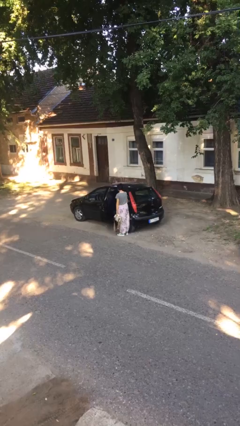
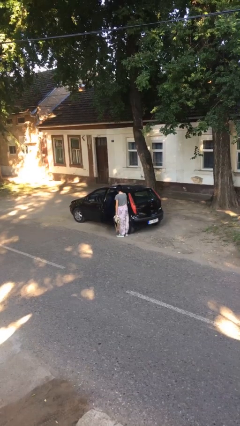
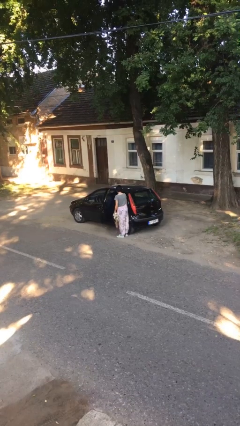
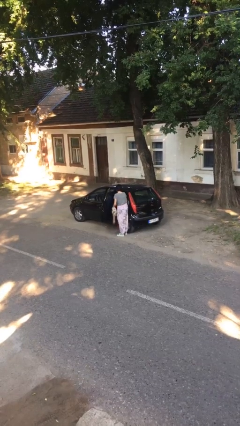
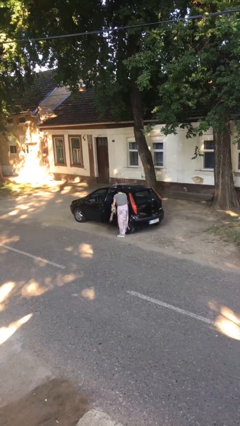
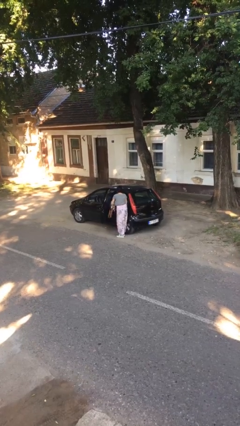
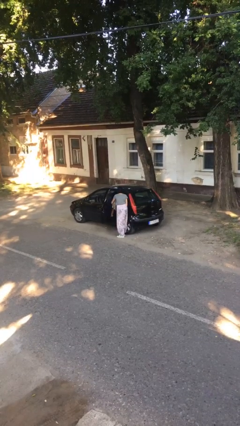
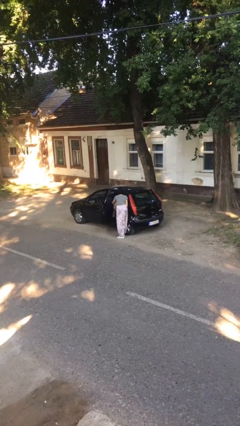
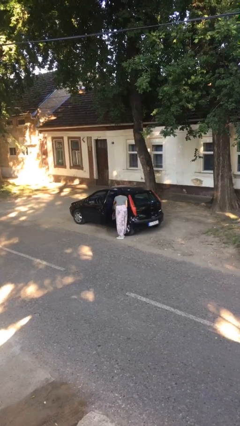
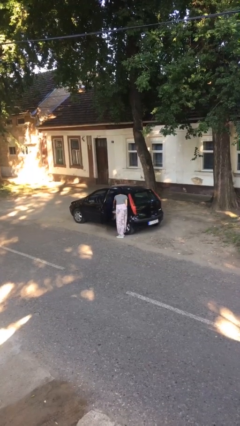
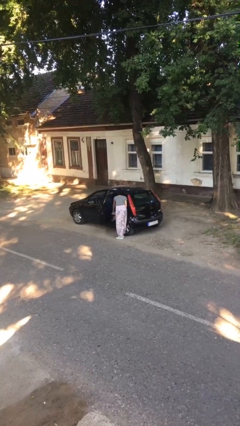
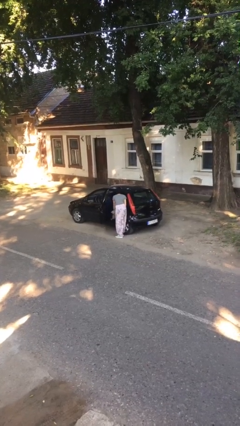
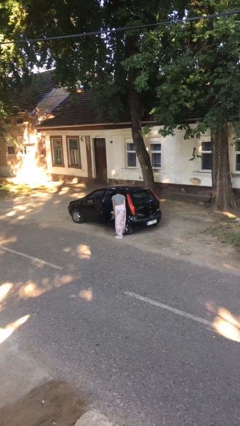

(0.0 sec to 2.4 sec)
person loads car

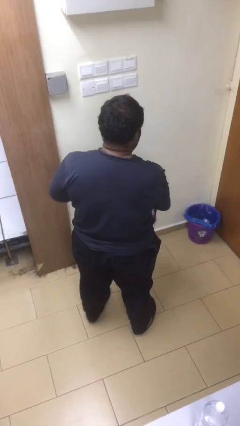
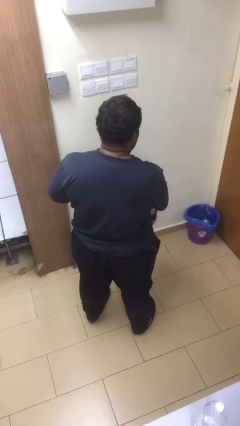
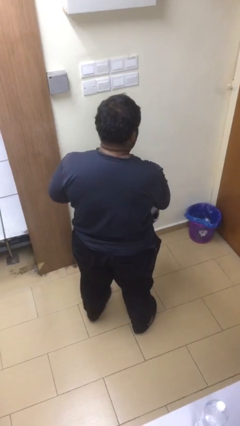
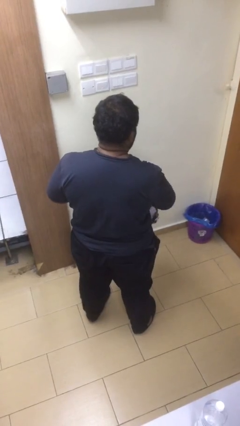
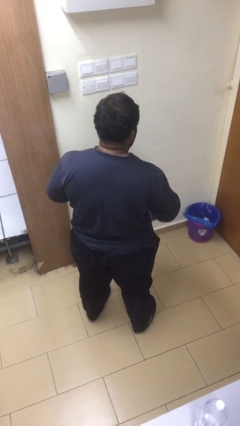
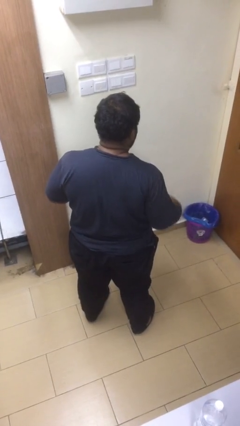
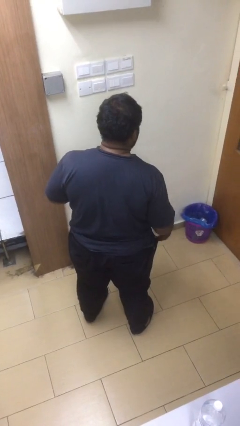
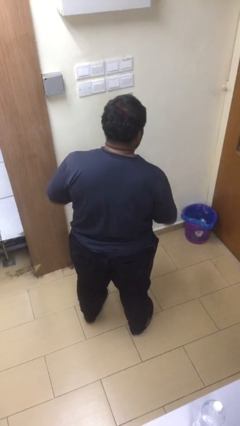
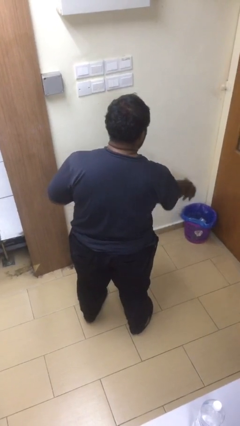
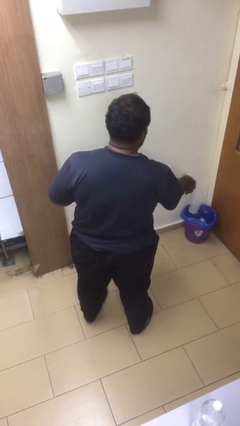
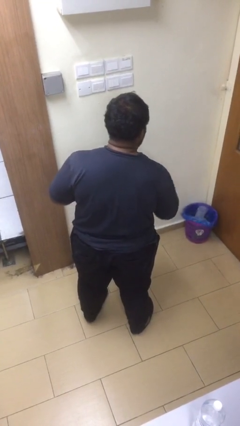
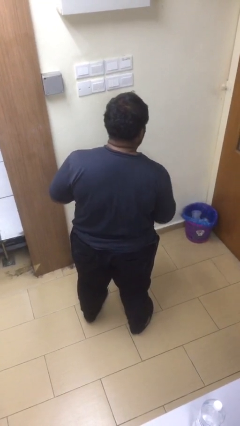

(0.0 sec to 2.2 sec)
person discards trash

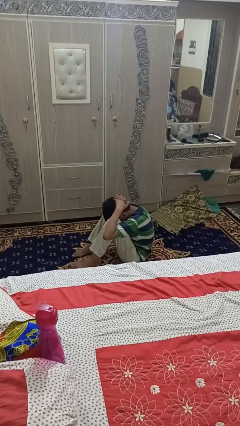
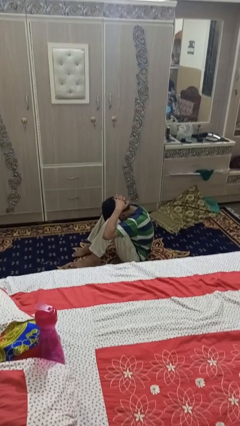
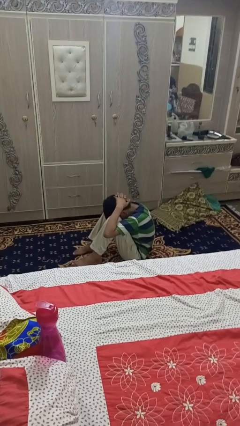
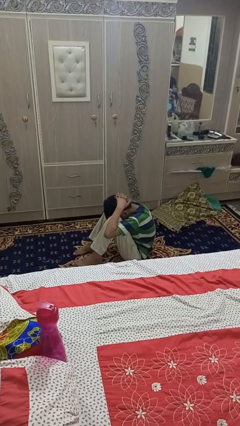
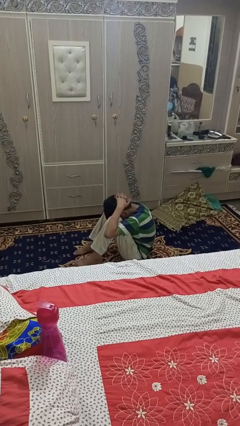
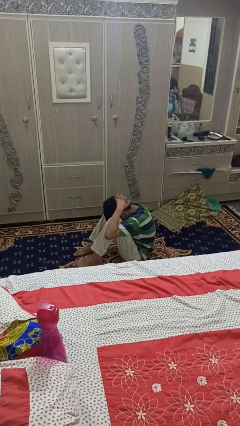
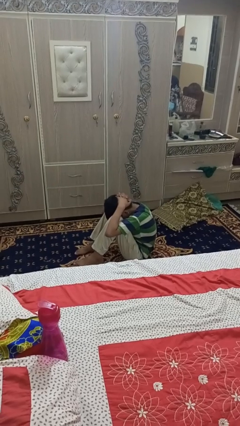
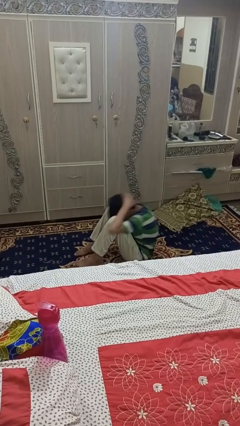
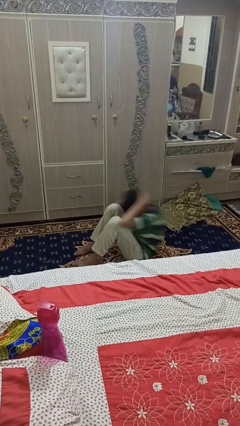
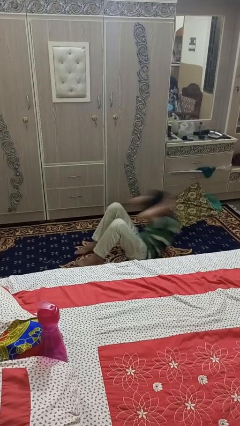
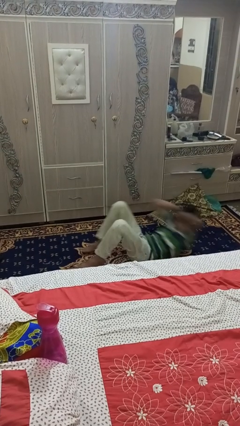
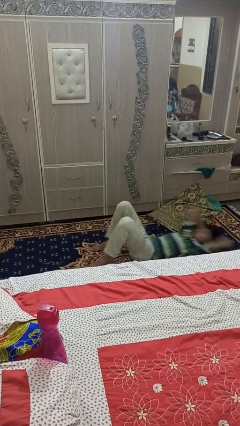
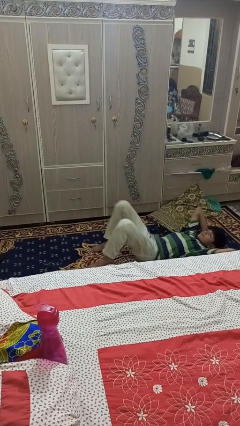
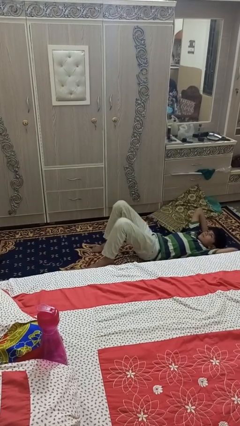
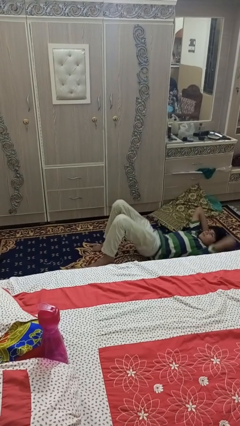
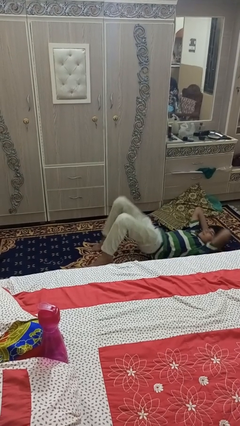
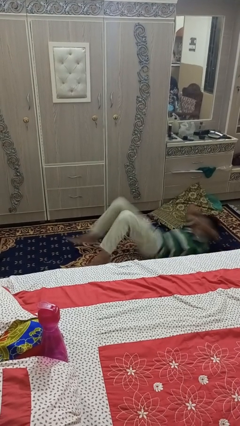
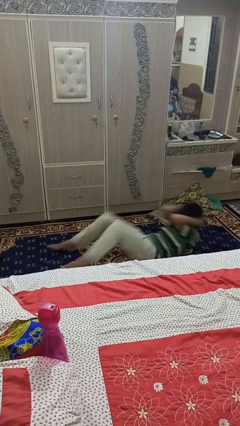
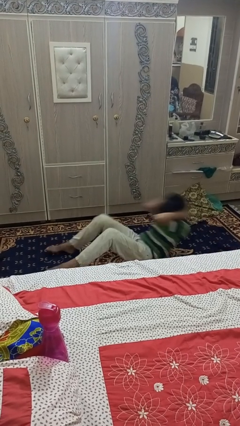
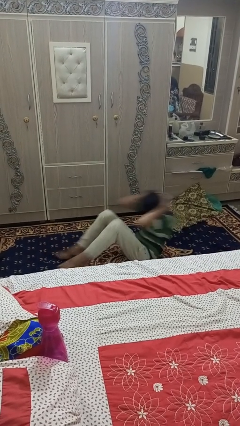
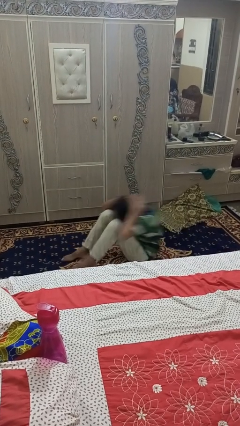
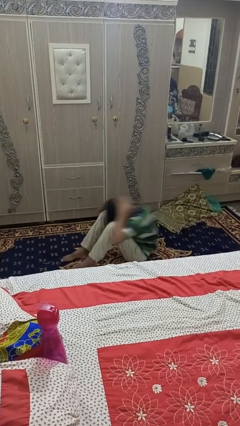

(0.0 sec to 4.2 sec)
person exercises with situp

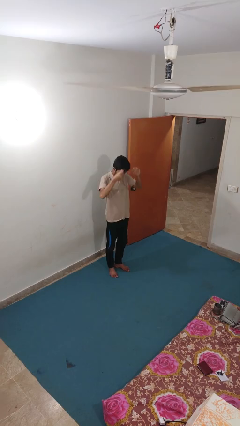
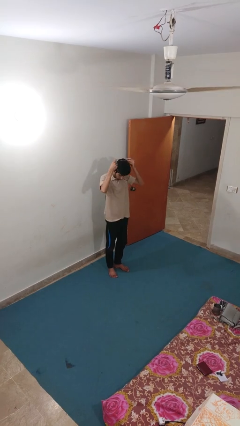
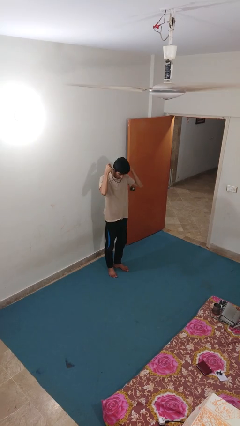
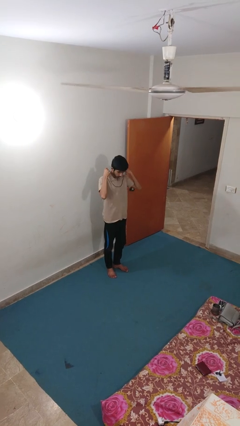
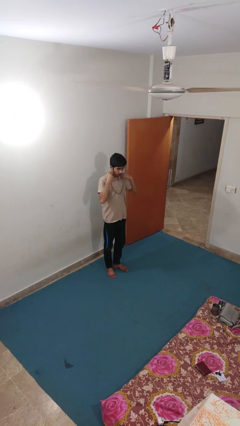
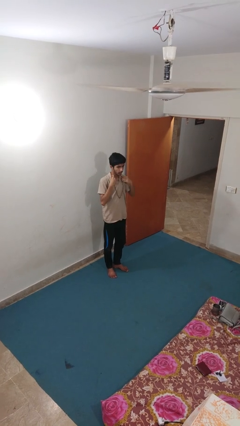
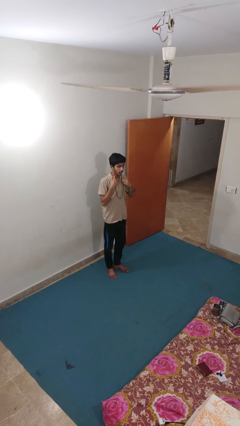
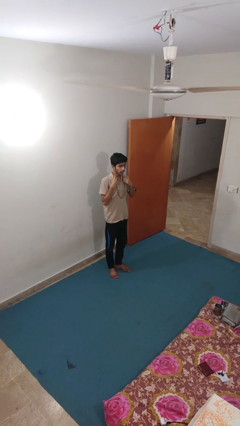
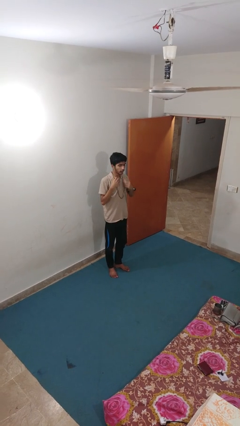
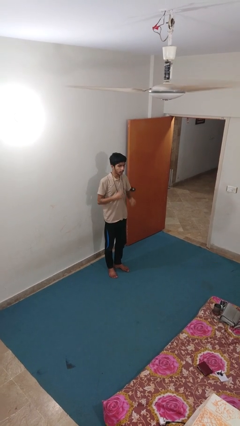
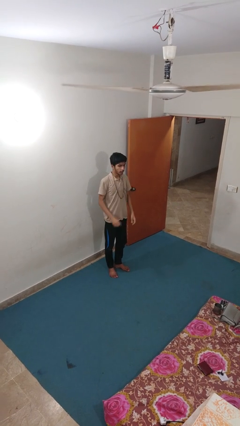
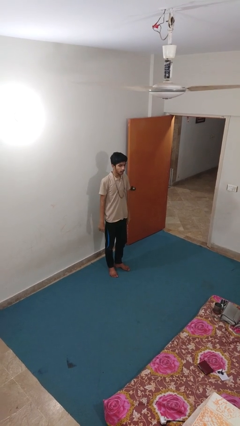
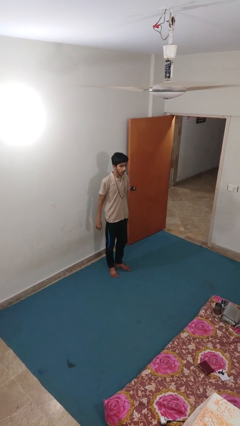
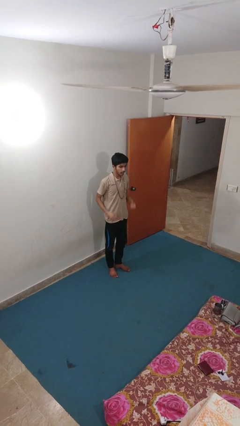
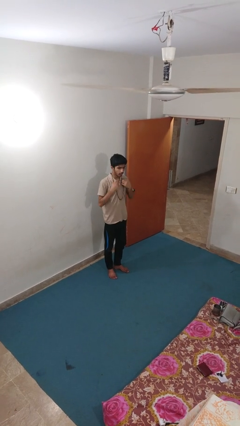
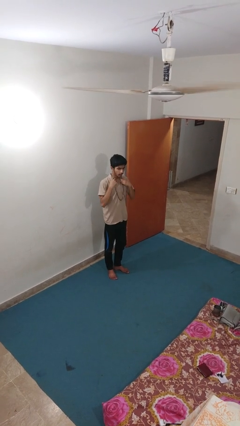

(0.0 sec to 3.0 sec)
person puts on necklace

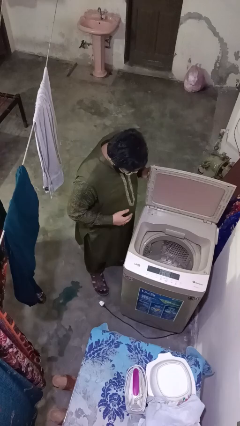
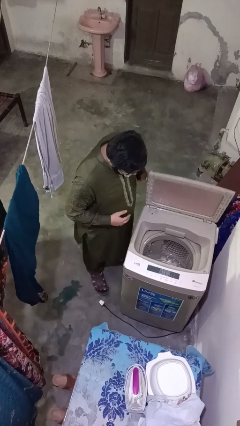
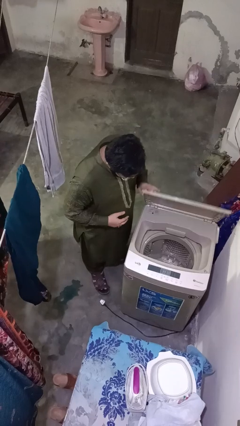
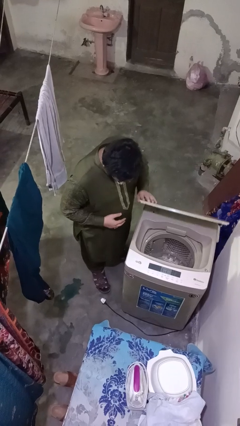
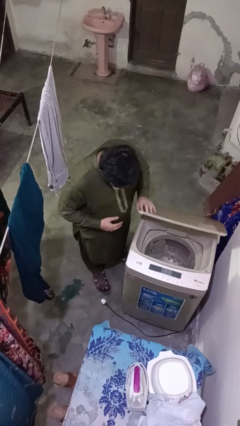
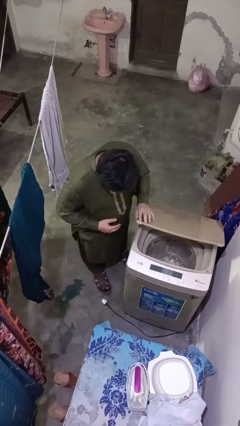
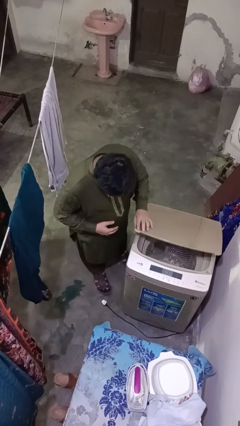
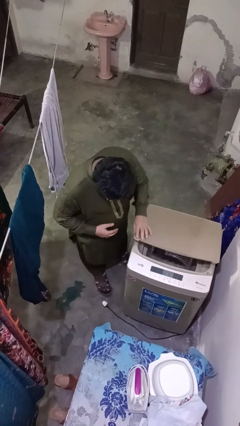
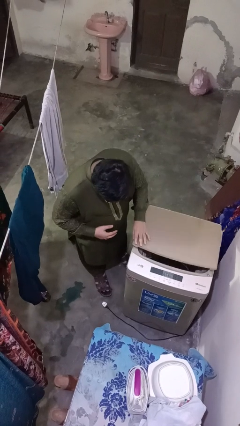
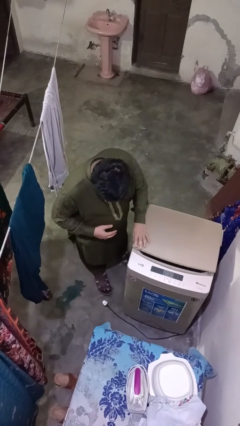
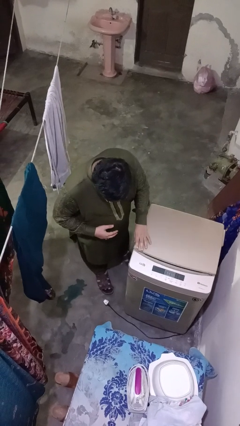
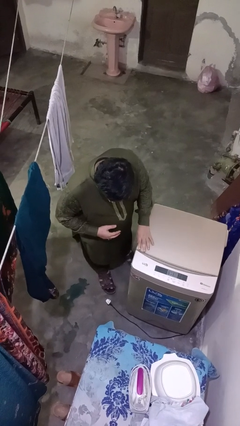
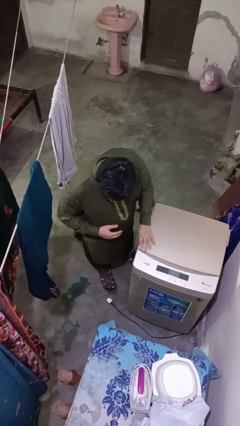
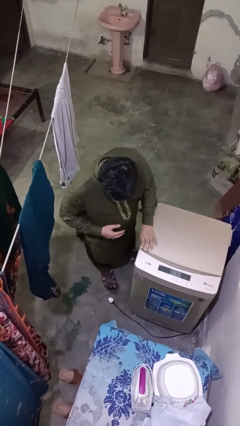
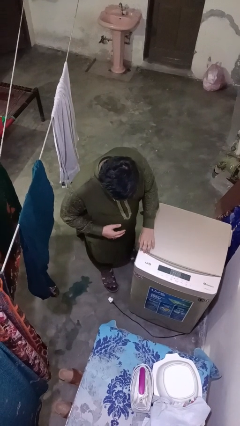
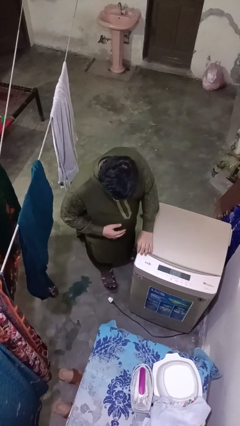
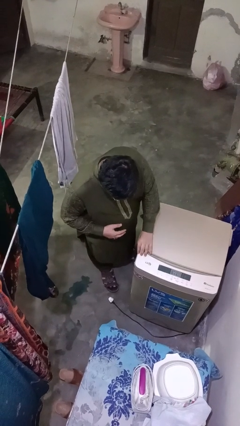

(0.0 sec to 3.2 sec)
person closes clothes washer

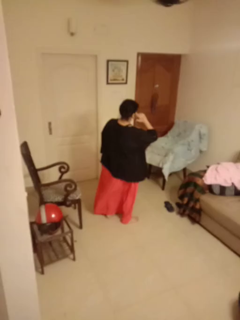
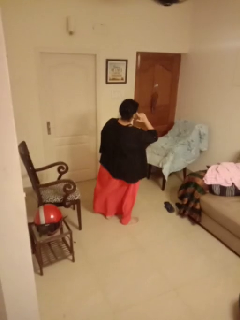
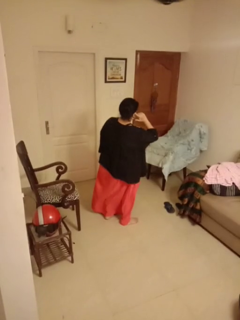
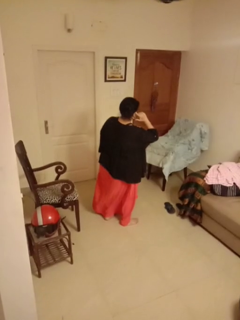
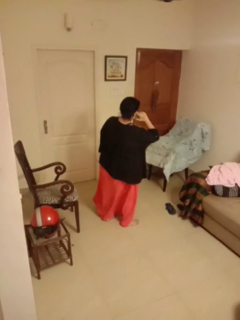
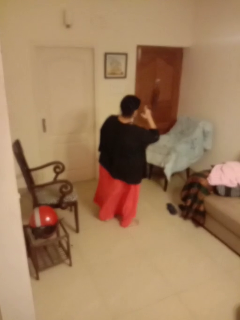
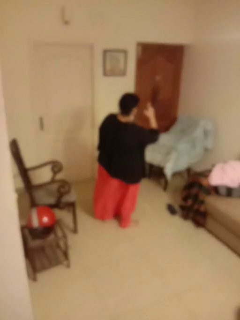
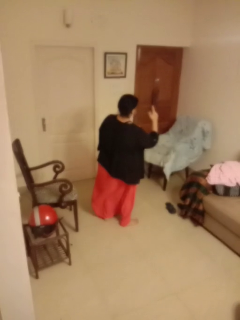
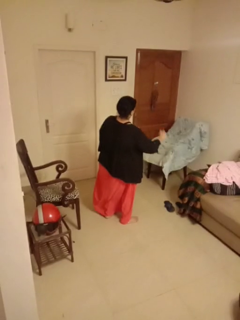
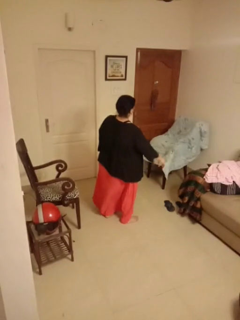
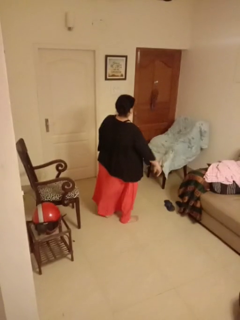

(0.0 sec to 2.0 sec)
person gestures listen closely

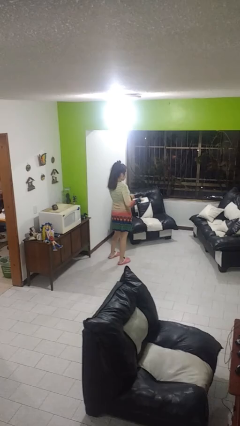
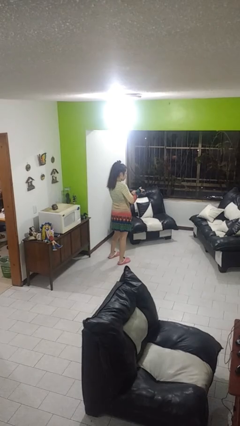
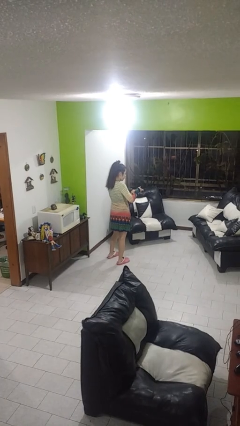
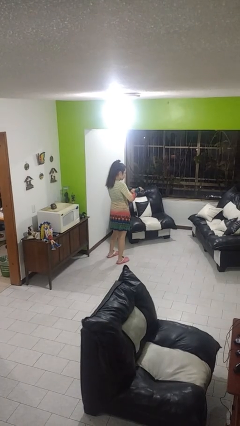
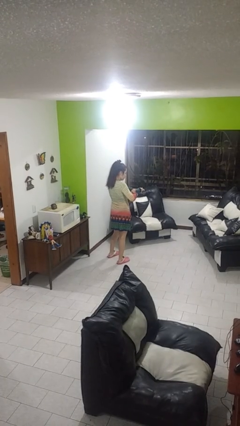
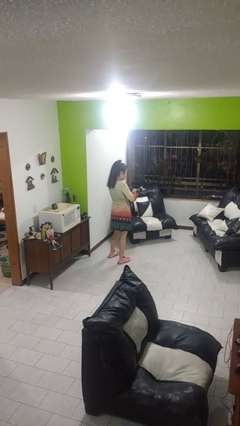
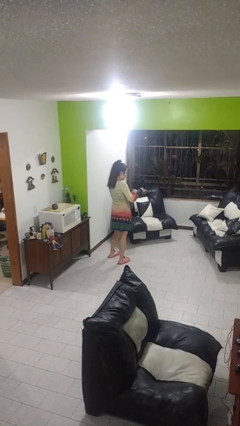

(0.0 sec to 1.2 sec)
person clips fingernails
